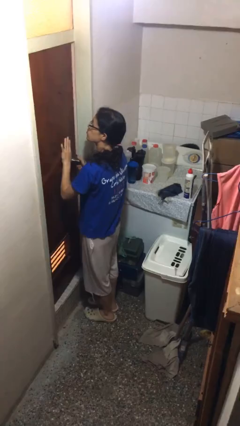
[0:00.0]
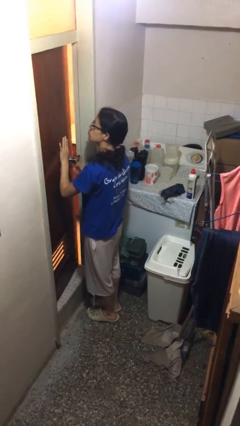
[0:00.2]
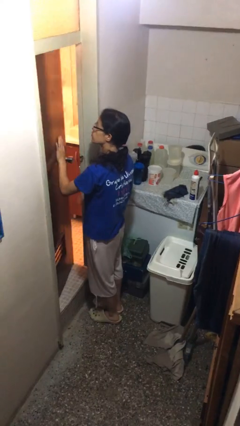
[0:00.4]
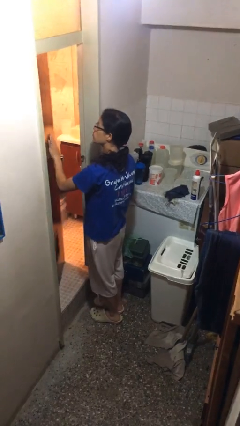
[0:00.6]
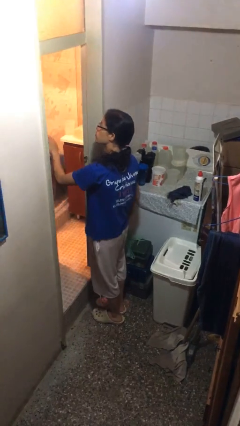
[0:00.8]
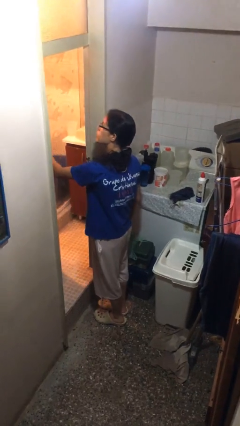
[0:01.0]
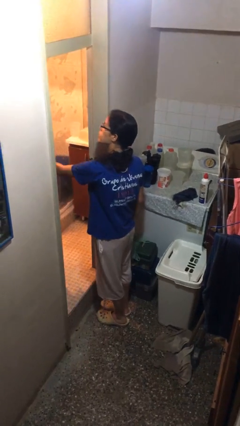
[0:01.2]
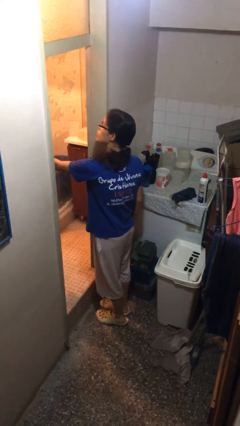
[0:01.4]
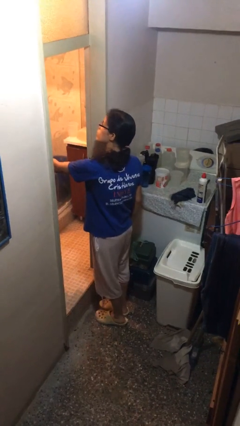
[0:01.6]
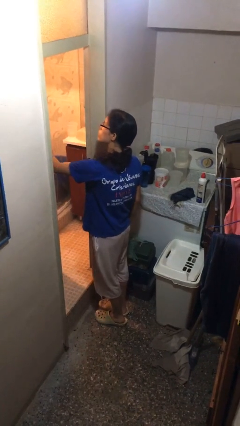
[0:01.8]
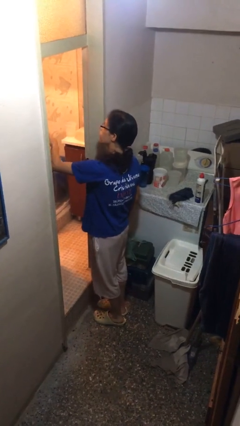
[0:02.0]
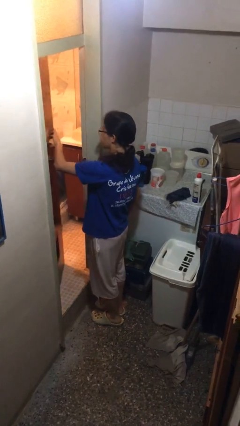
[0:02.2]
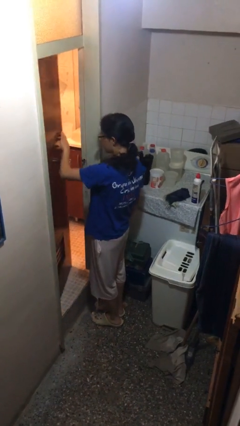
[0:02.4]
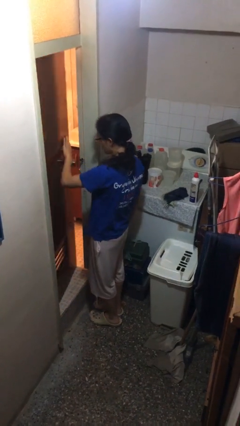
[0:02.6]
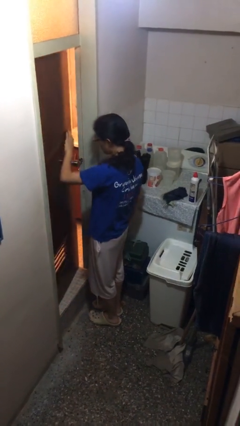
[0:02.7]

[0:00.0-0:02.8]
person opens facility door

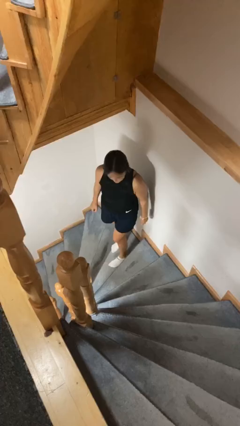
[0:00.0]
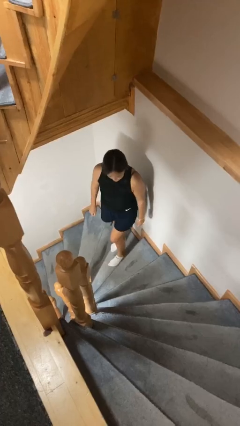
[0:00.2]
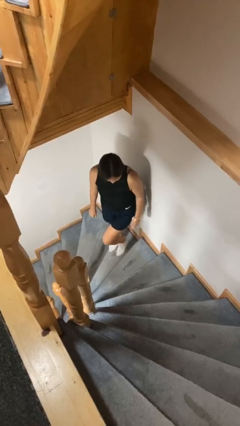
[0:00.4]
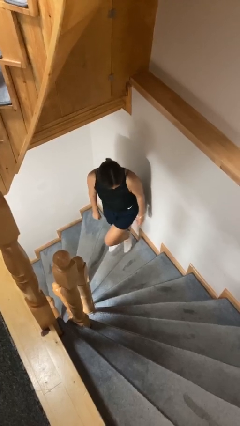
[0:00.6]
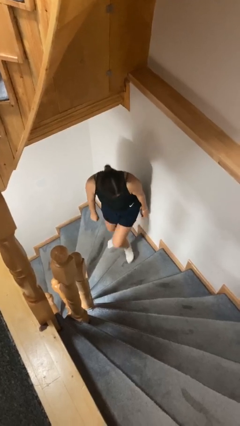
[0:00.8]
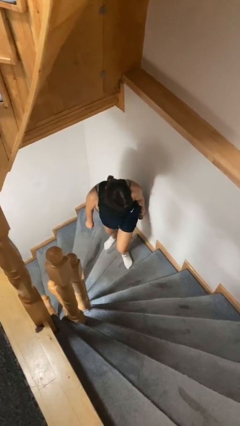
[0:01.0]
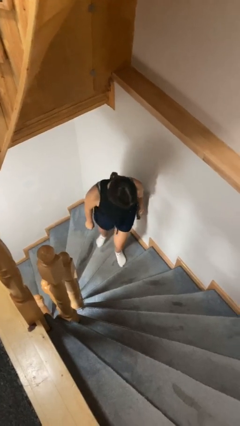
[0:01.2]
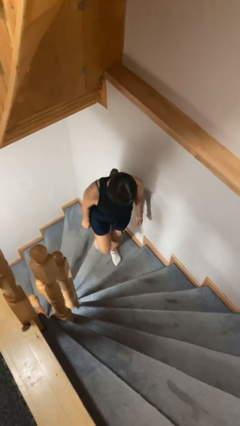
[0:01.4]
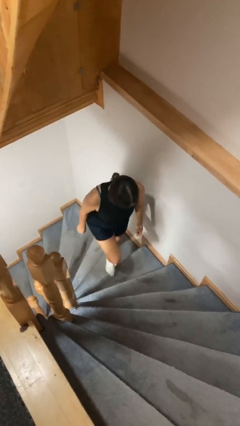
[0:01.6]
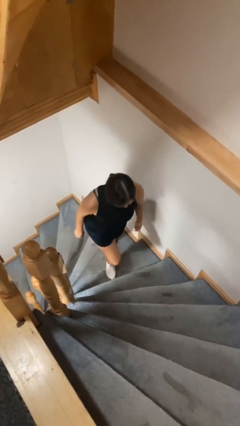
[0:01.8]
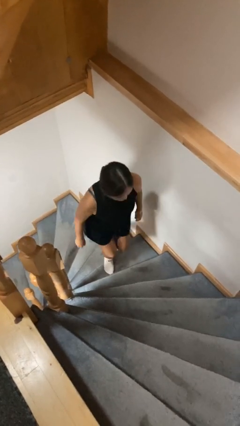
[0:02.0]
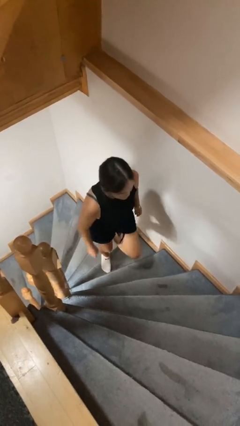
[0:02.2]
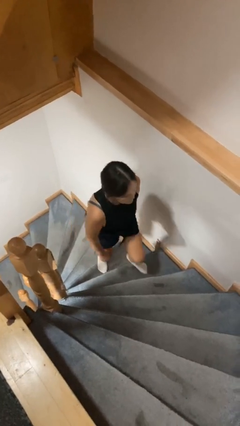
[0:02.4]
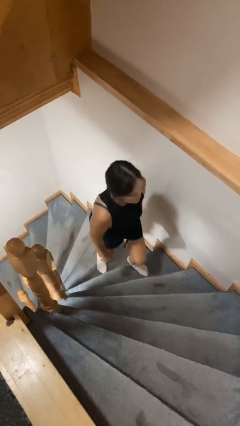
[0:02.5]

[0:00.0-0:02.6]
person climbs up stairs

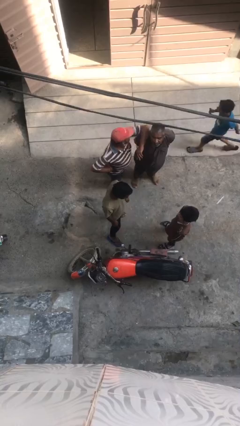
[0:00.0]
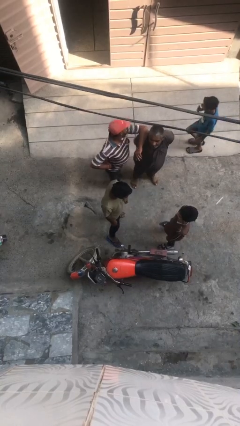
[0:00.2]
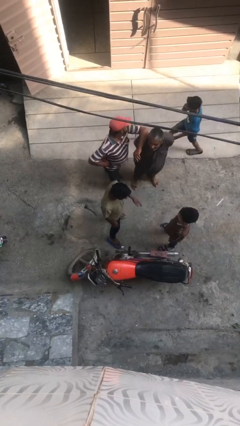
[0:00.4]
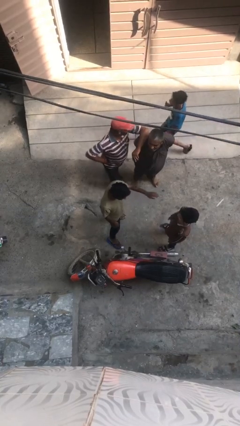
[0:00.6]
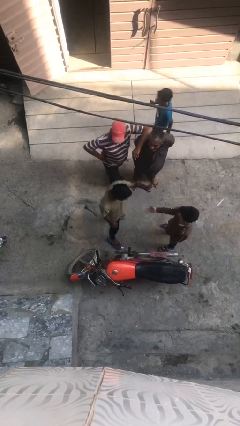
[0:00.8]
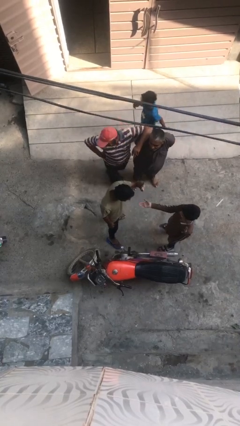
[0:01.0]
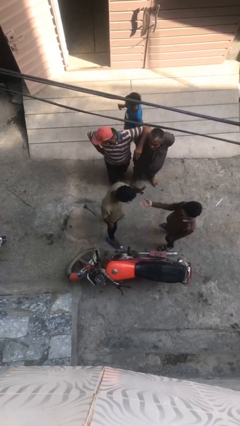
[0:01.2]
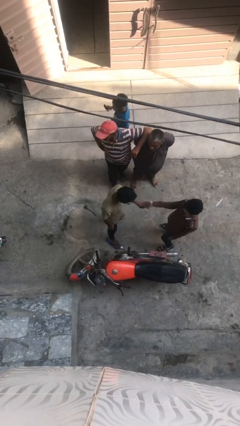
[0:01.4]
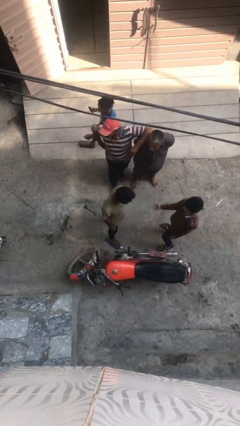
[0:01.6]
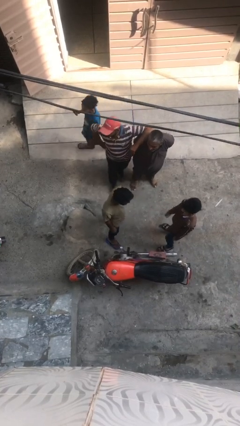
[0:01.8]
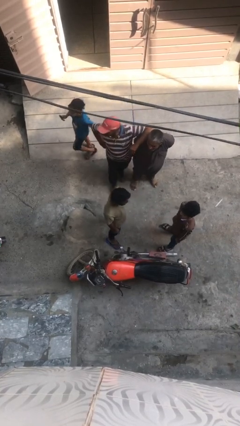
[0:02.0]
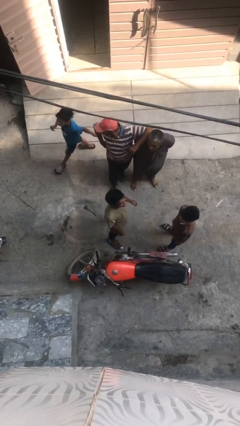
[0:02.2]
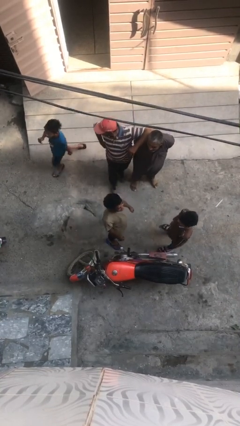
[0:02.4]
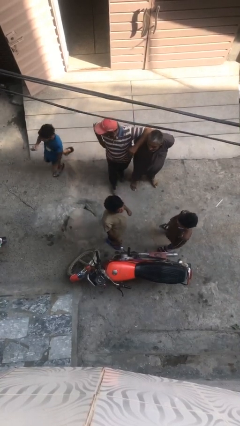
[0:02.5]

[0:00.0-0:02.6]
person laughs with person

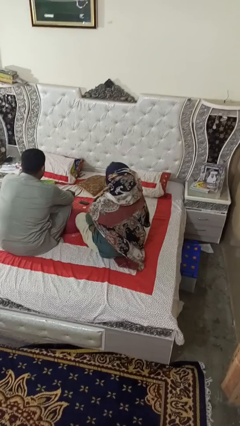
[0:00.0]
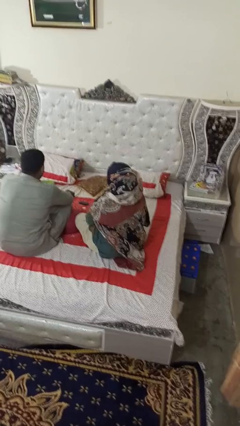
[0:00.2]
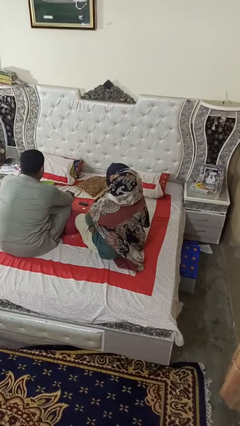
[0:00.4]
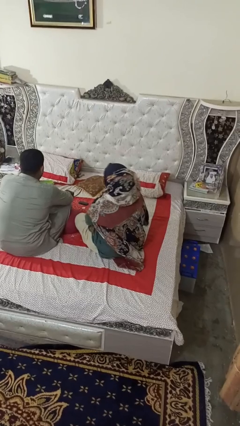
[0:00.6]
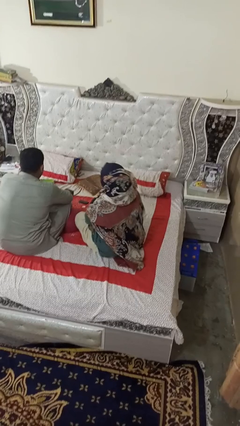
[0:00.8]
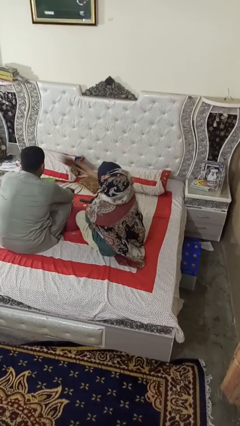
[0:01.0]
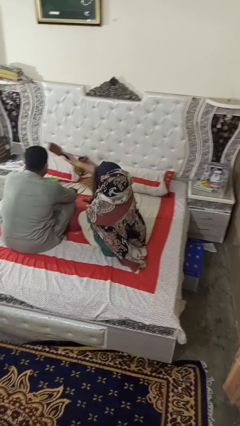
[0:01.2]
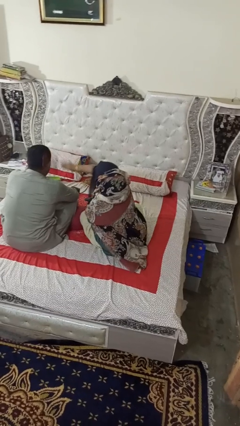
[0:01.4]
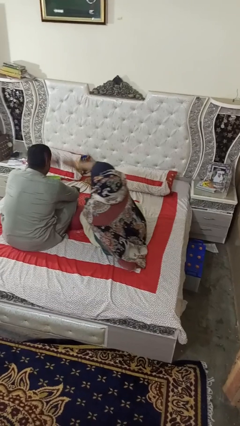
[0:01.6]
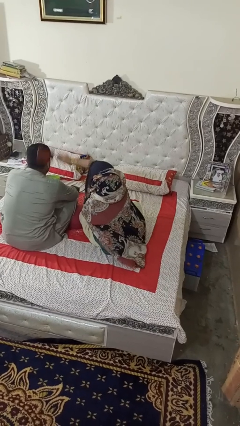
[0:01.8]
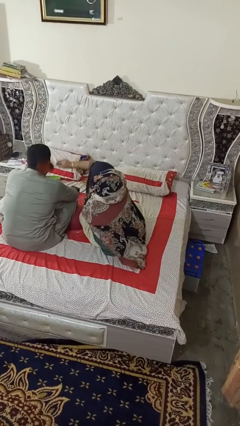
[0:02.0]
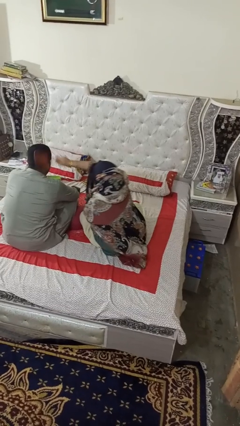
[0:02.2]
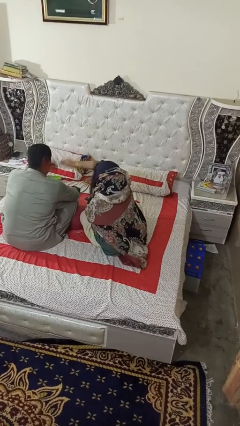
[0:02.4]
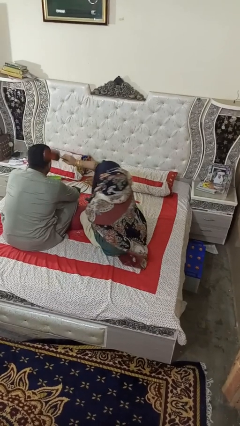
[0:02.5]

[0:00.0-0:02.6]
person brushes hair of person

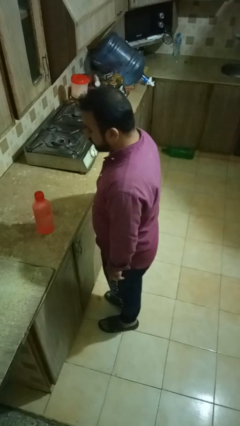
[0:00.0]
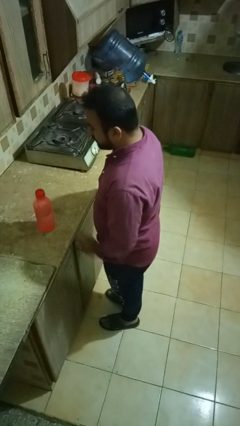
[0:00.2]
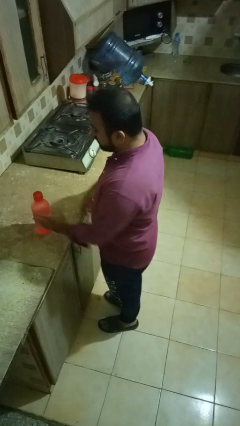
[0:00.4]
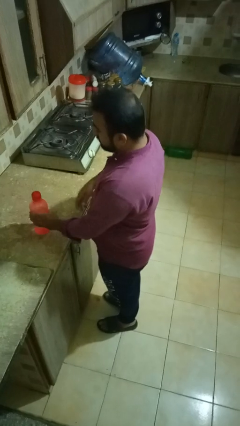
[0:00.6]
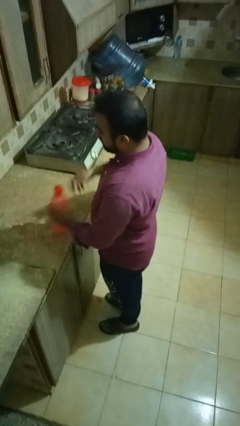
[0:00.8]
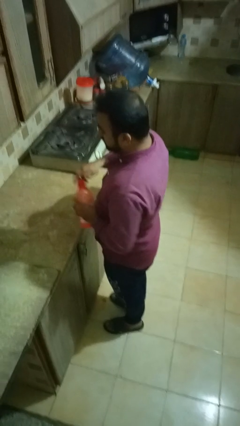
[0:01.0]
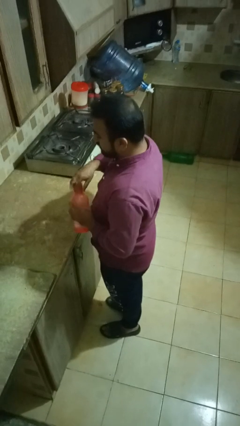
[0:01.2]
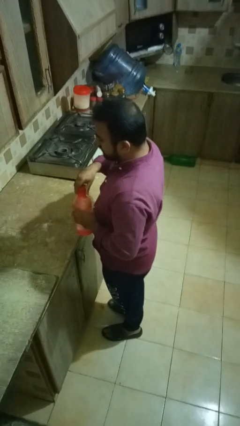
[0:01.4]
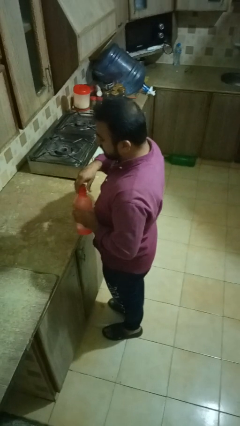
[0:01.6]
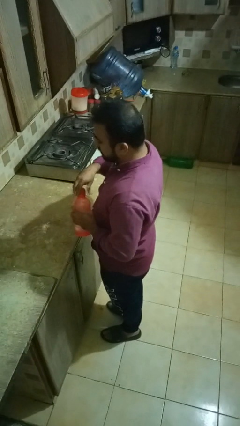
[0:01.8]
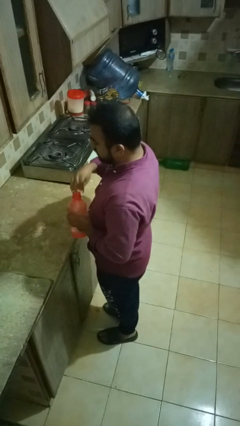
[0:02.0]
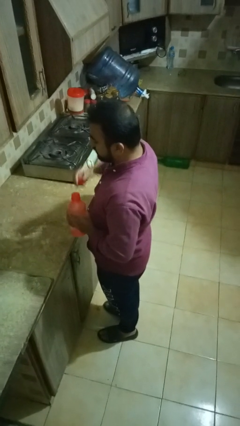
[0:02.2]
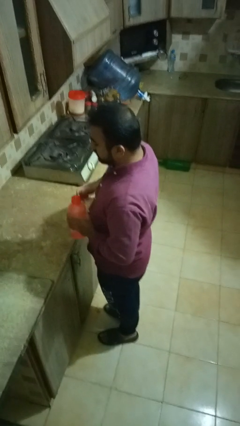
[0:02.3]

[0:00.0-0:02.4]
person unscrews lid from bottle

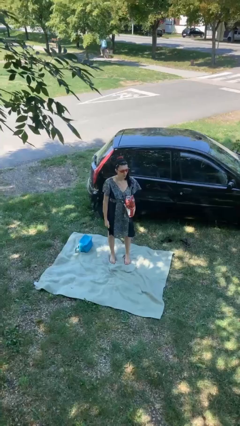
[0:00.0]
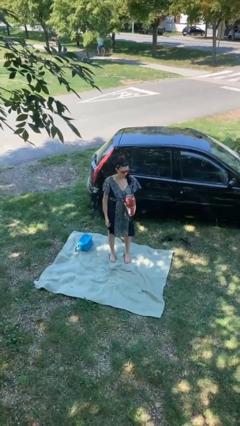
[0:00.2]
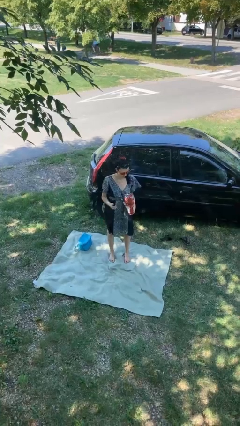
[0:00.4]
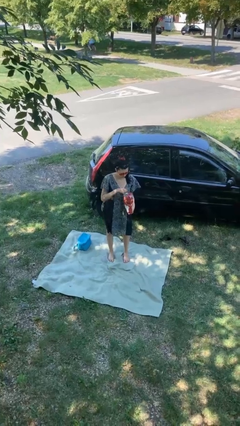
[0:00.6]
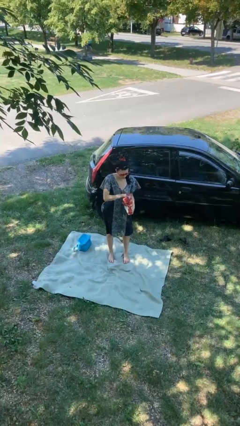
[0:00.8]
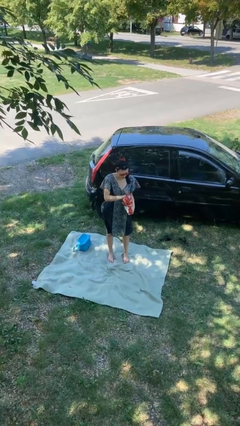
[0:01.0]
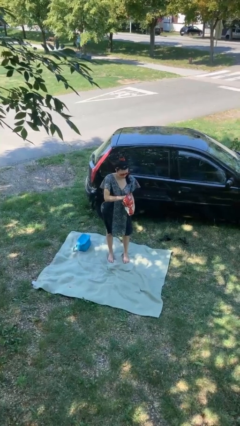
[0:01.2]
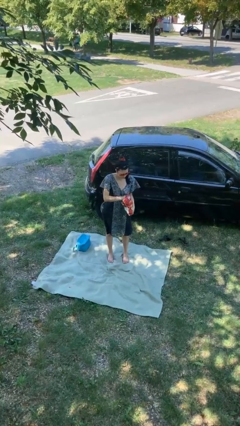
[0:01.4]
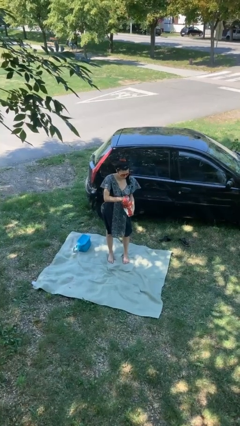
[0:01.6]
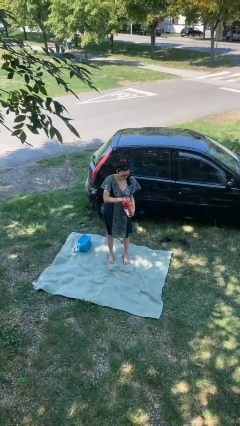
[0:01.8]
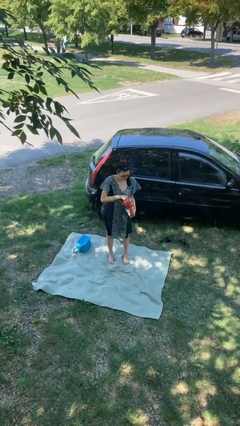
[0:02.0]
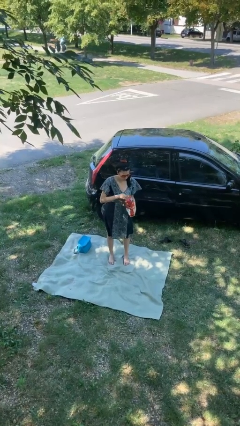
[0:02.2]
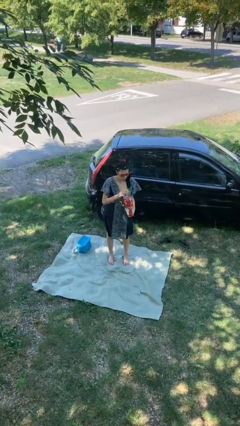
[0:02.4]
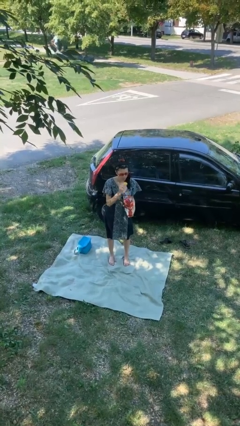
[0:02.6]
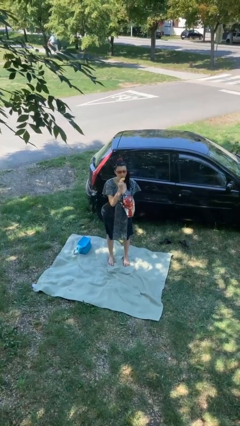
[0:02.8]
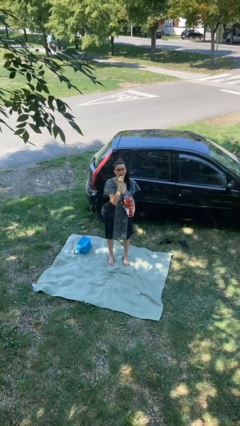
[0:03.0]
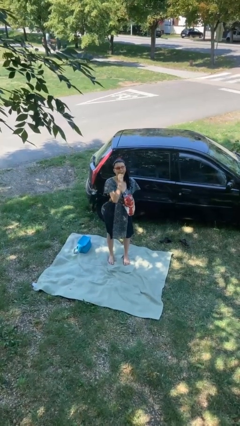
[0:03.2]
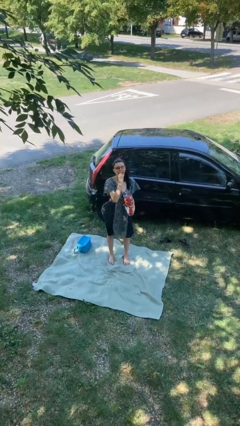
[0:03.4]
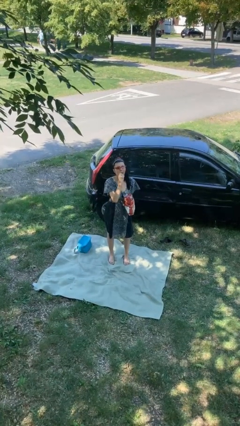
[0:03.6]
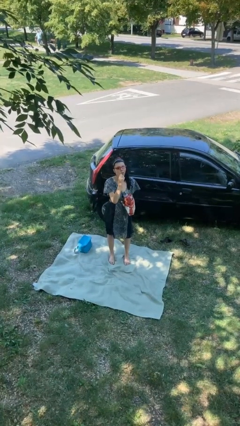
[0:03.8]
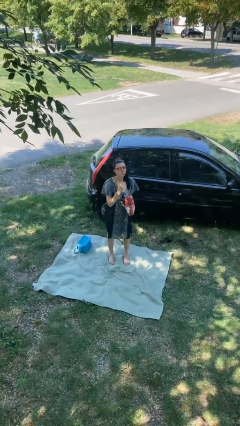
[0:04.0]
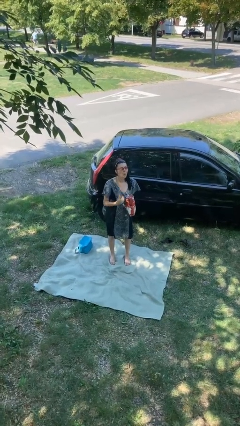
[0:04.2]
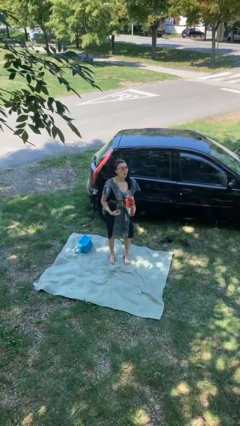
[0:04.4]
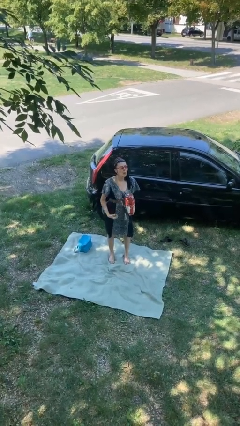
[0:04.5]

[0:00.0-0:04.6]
person eats snack from bag
